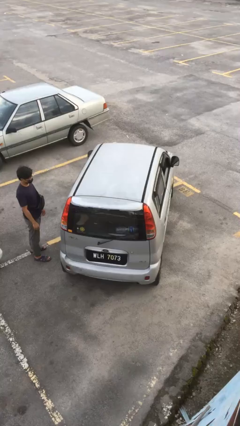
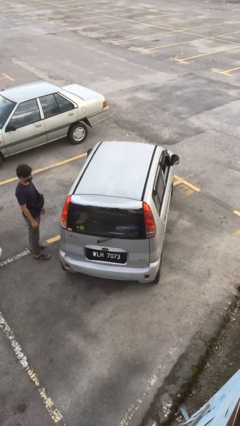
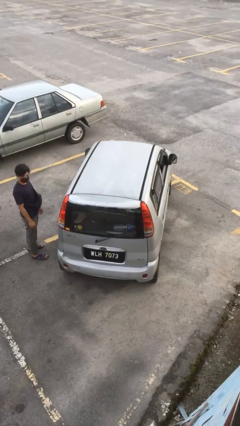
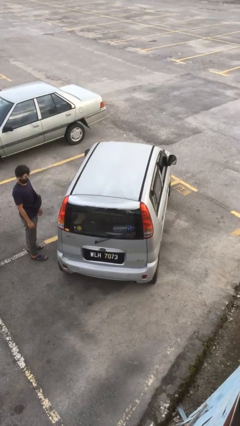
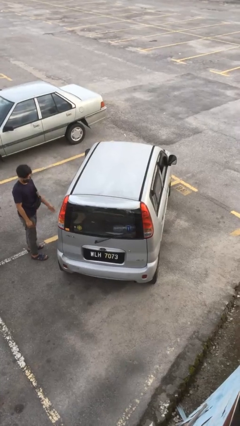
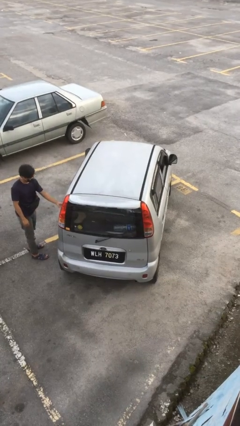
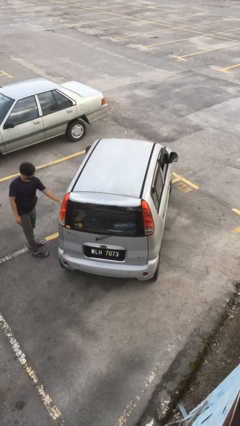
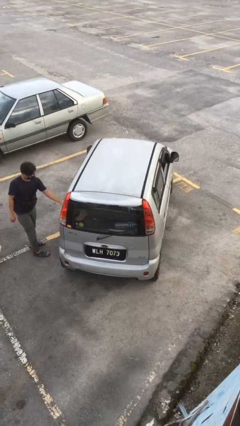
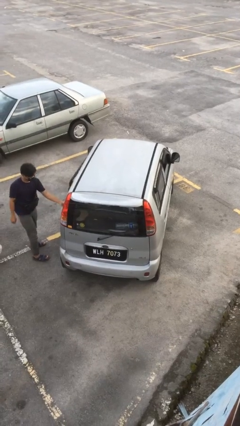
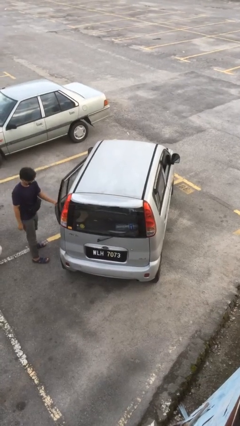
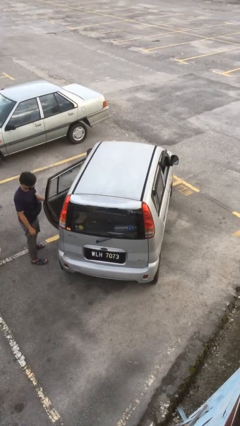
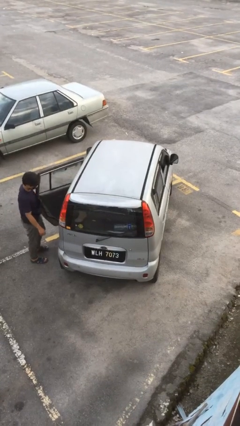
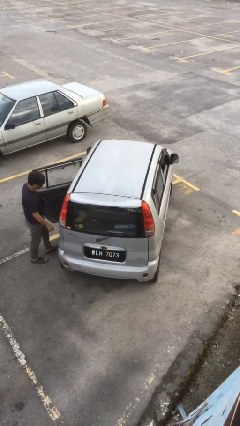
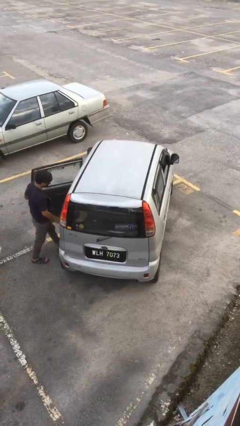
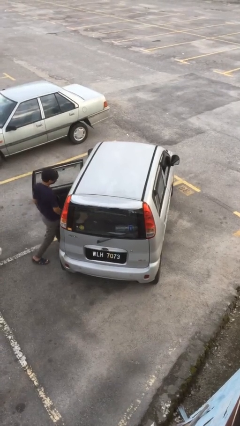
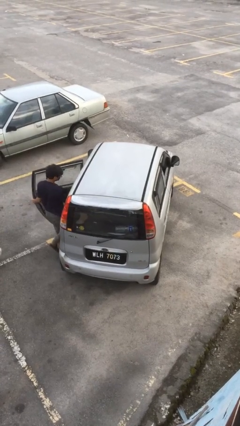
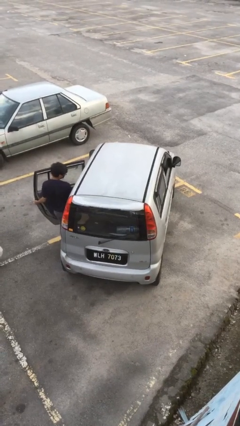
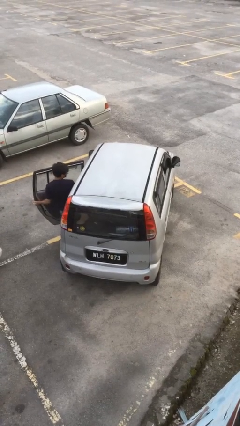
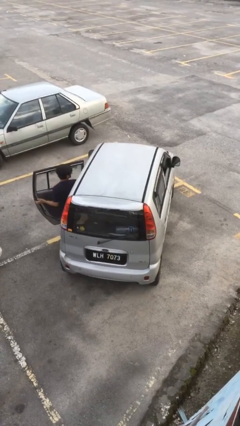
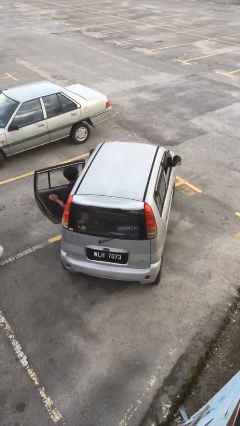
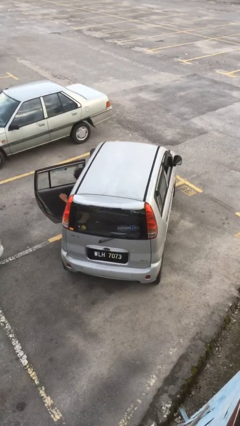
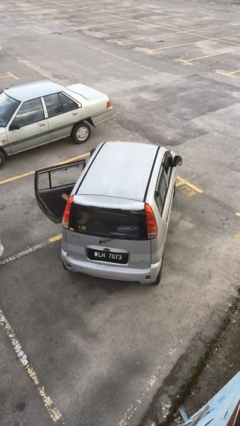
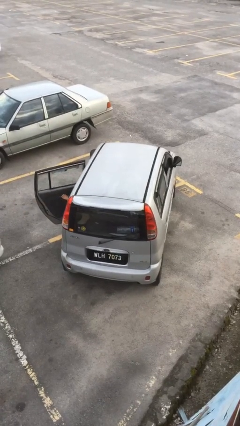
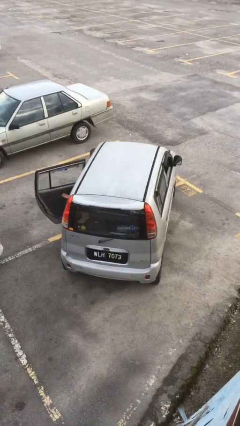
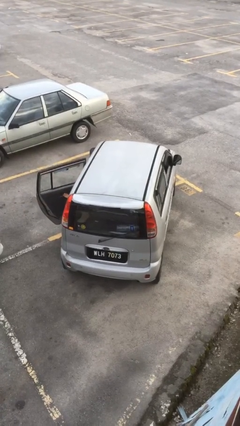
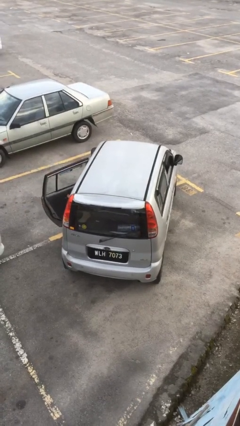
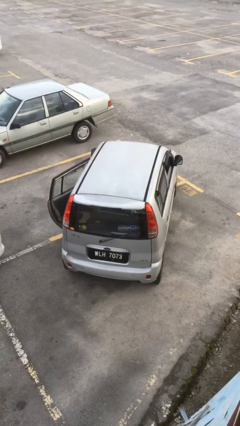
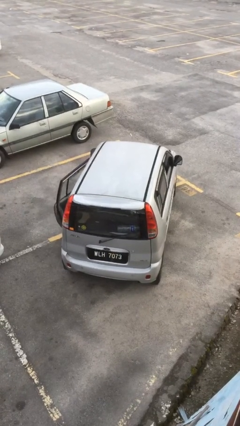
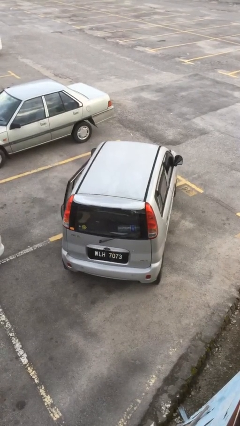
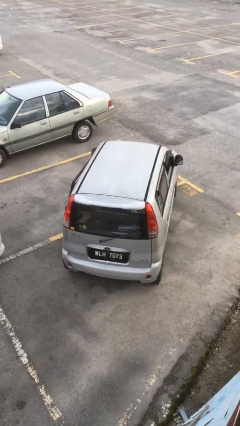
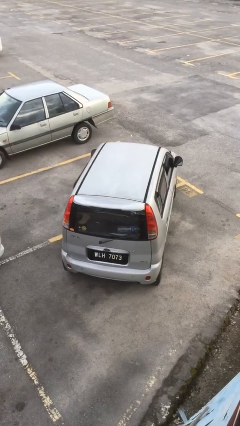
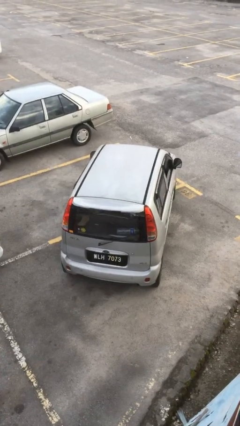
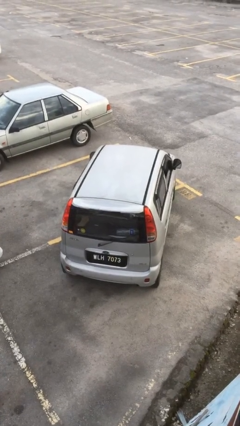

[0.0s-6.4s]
car picks up person

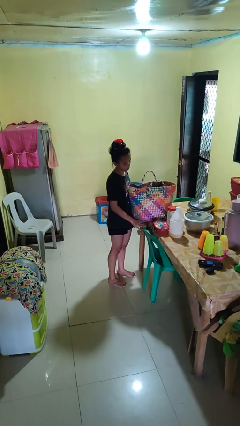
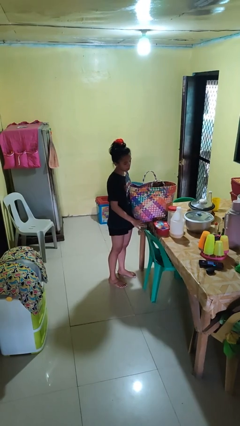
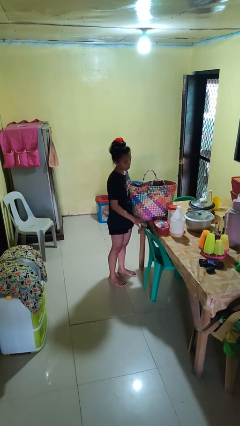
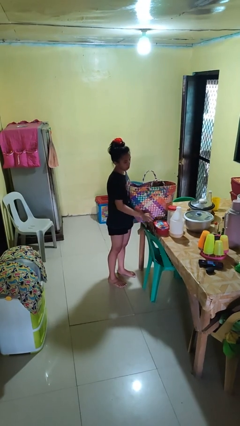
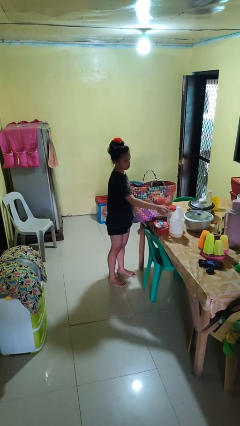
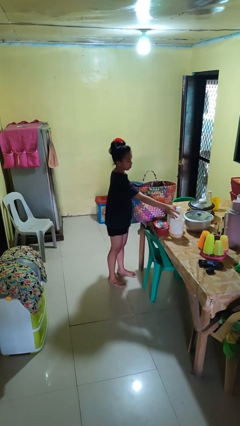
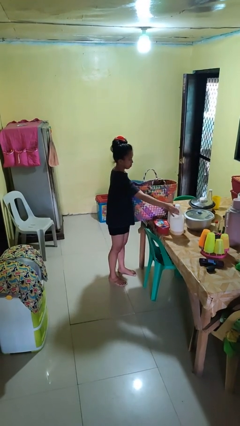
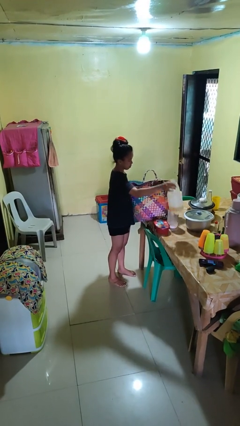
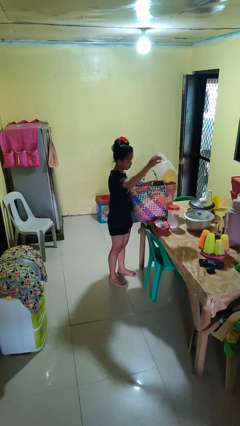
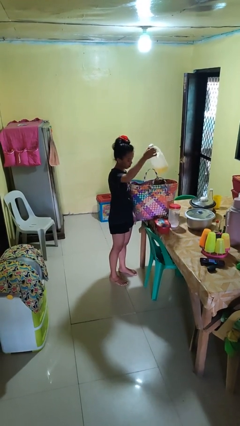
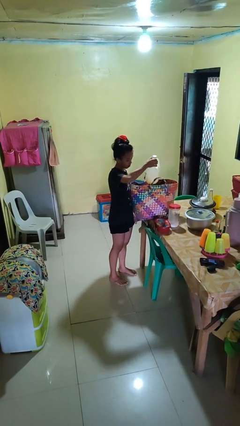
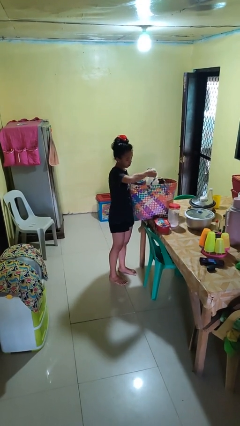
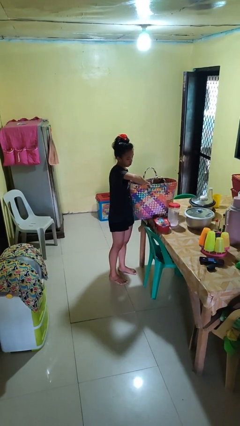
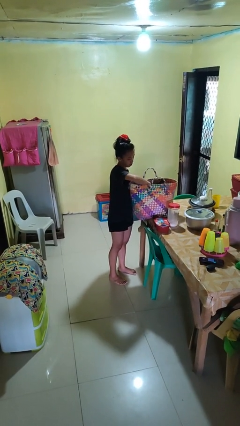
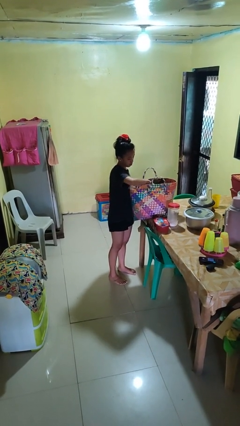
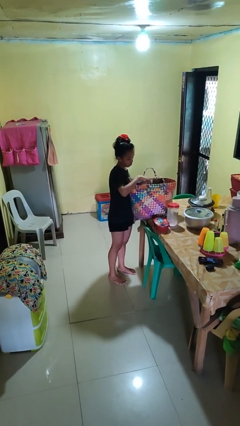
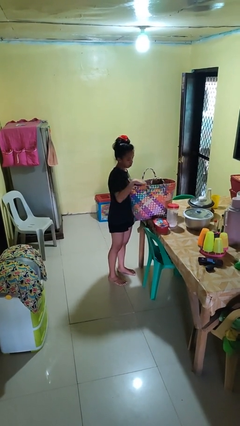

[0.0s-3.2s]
person puts object into basket

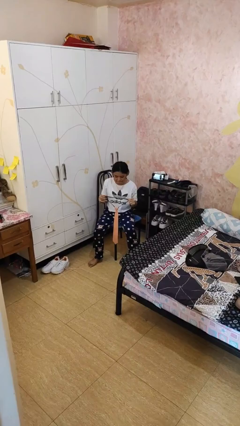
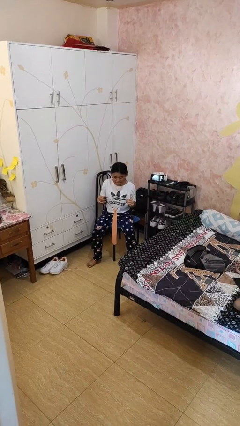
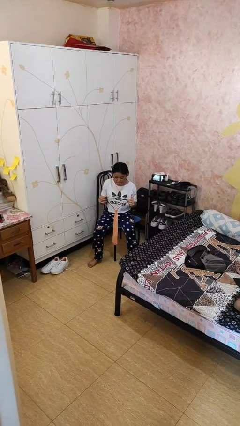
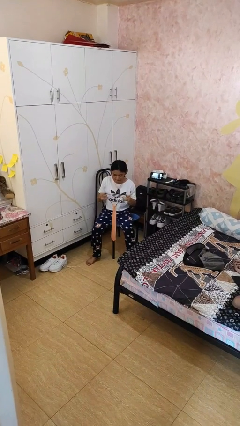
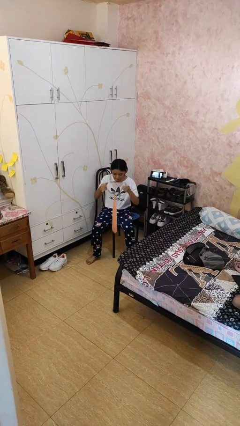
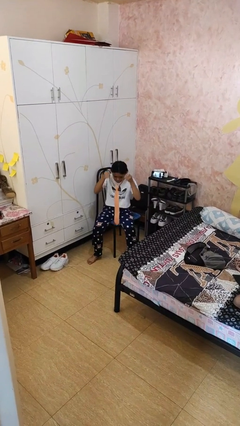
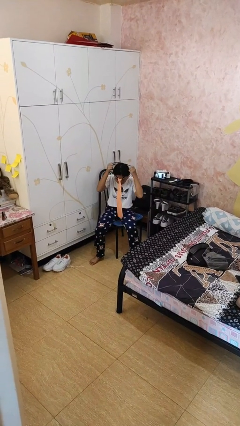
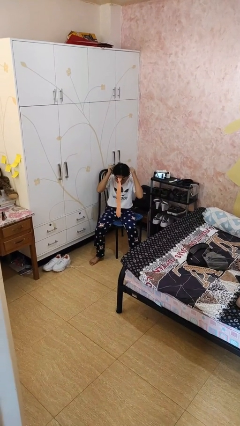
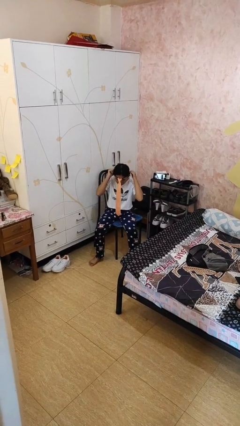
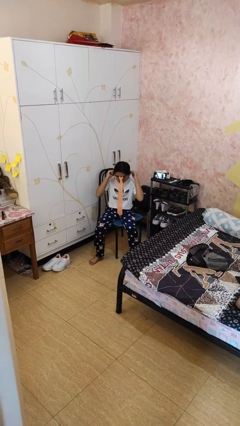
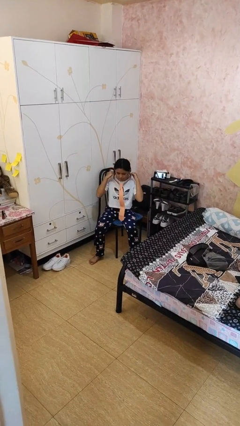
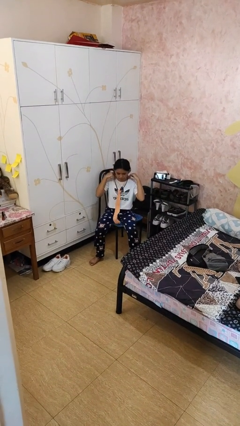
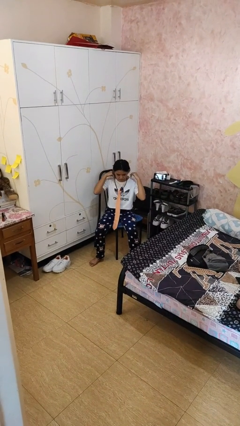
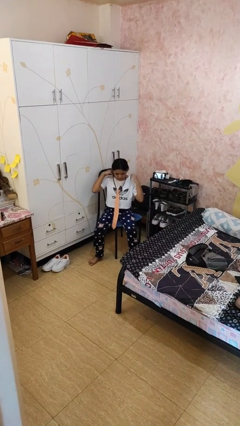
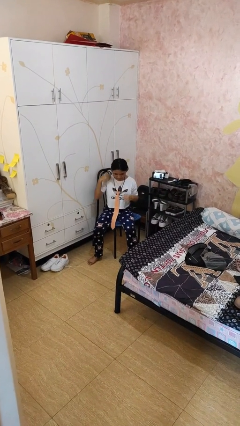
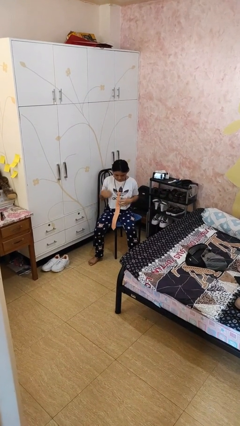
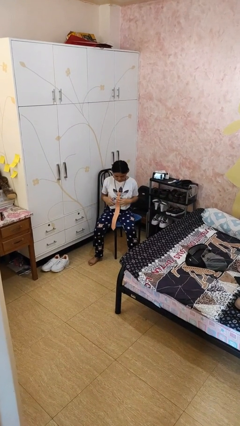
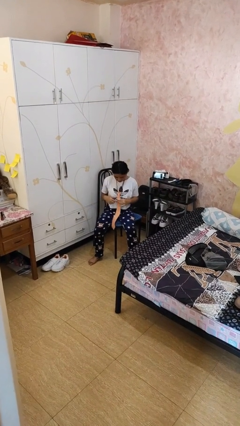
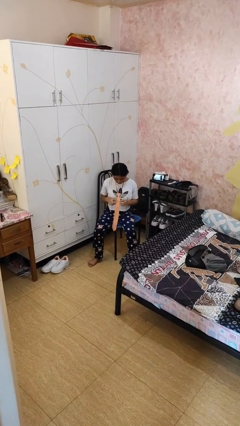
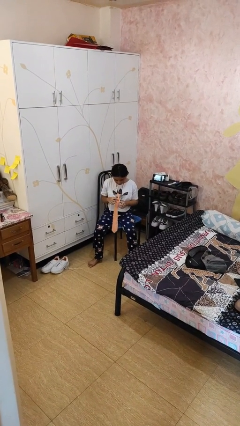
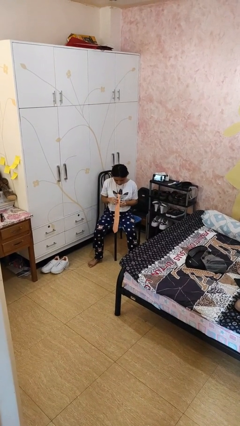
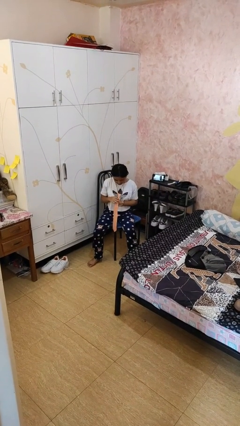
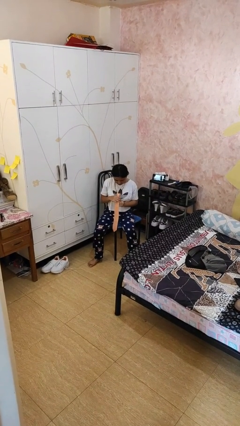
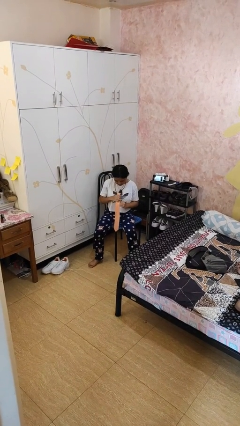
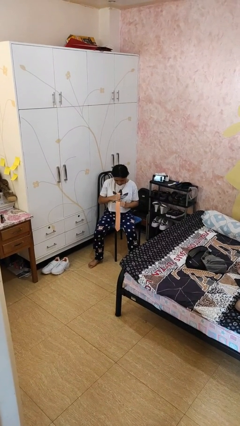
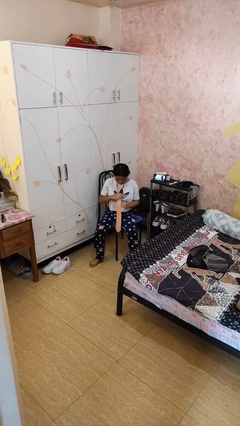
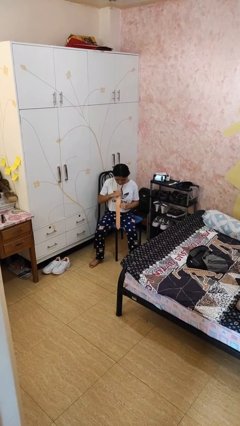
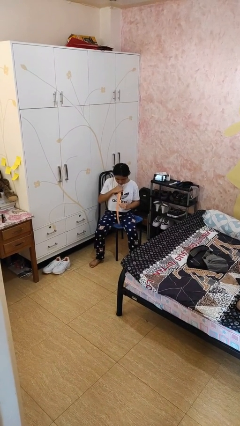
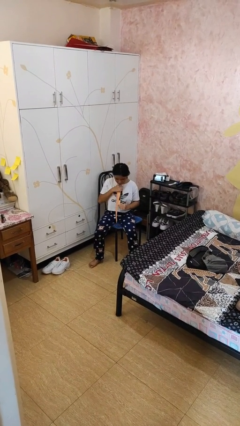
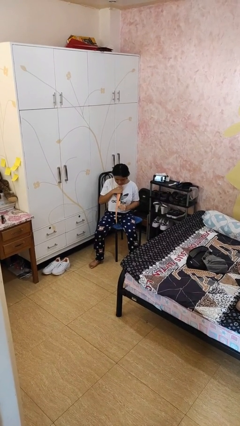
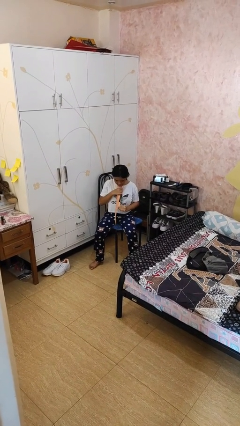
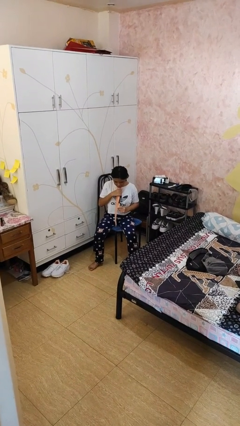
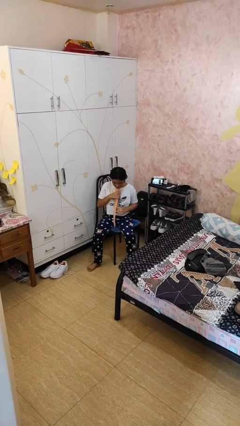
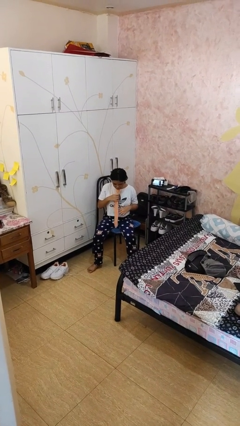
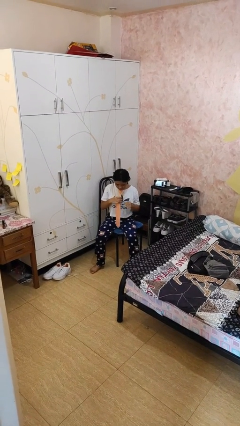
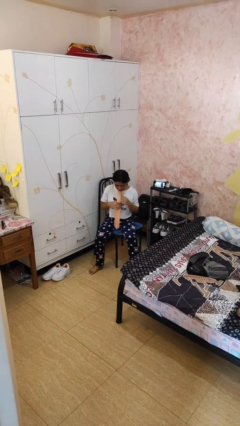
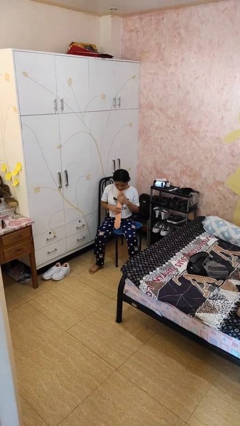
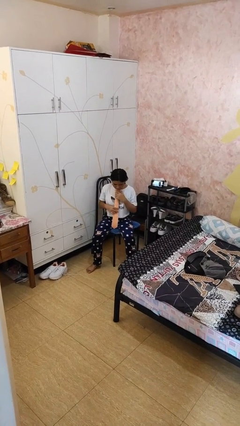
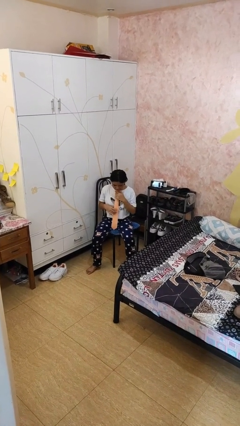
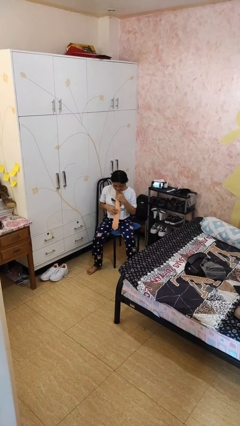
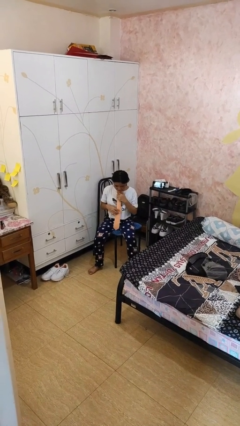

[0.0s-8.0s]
person puts on necktie

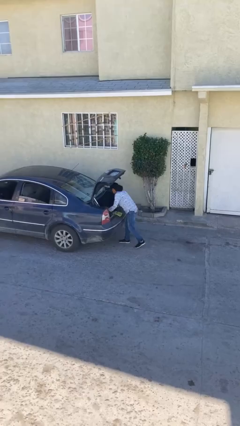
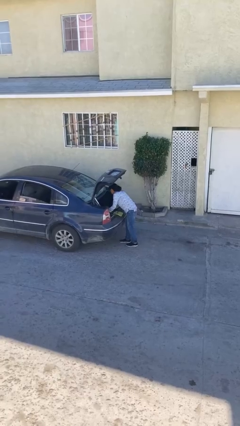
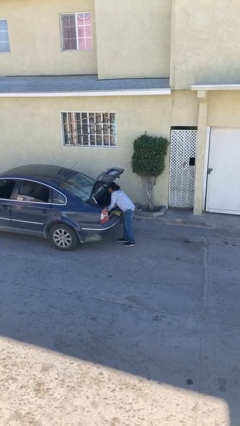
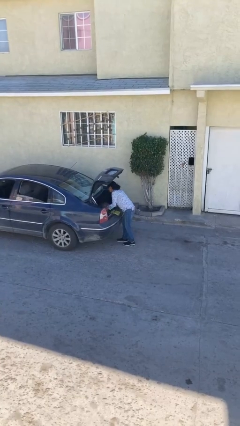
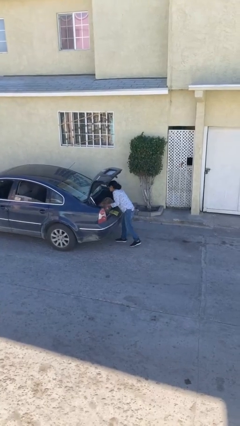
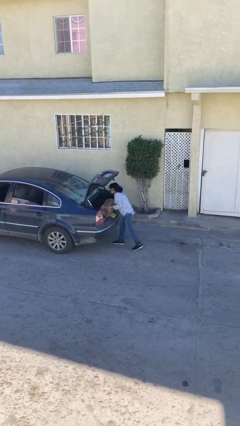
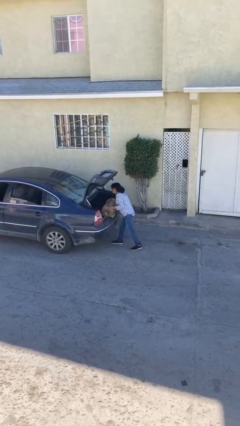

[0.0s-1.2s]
person unloads car
